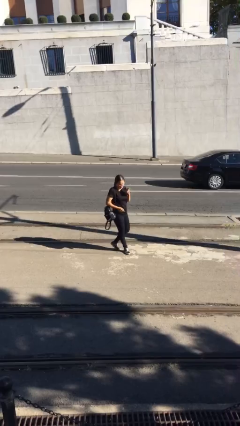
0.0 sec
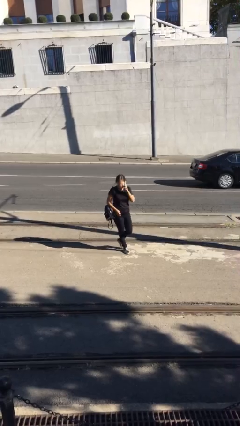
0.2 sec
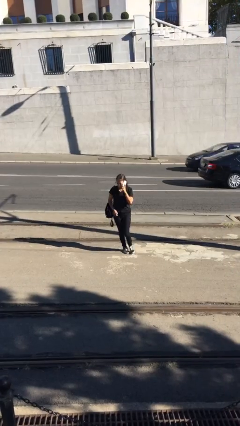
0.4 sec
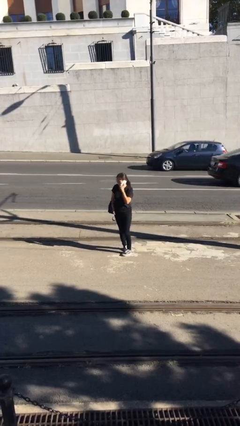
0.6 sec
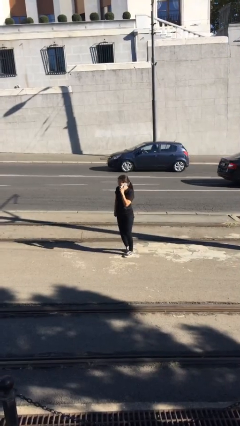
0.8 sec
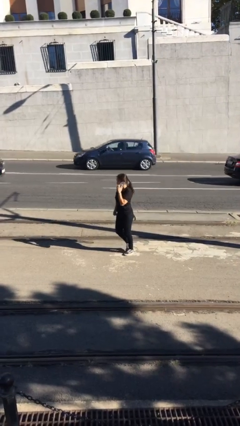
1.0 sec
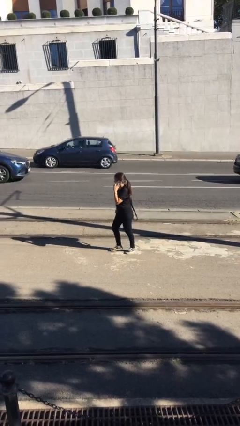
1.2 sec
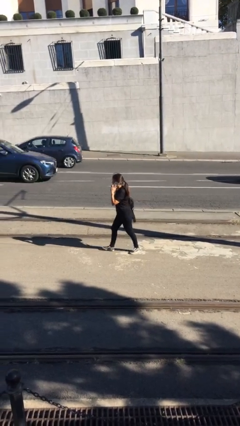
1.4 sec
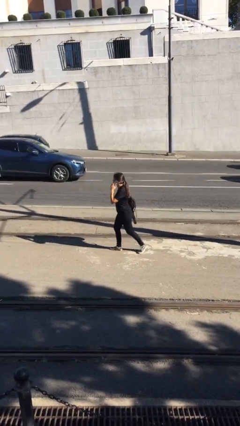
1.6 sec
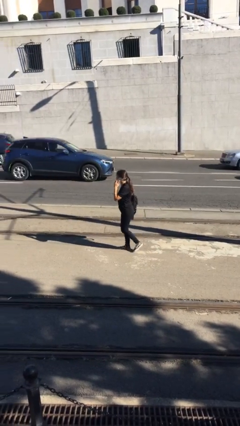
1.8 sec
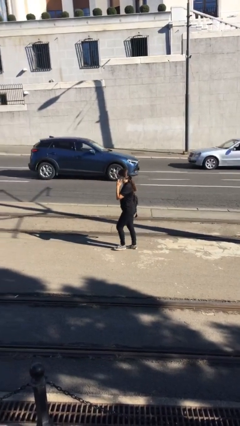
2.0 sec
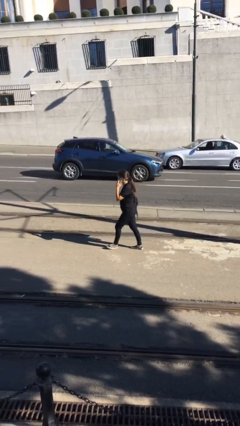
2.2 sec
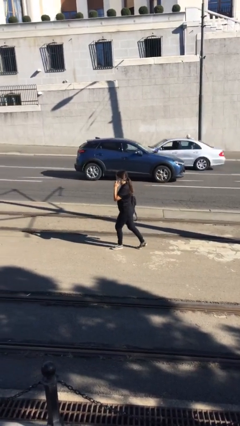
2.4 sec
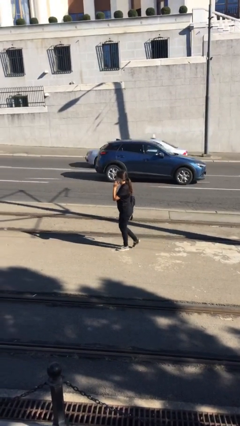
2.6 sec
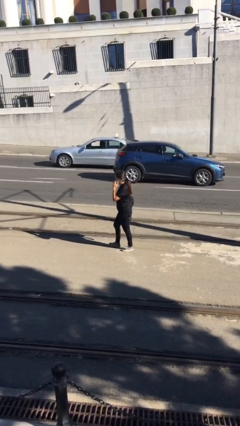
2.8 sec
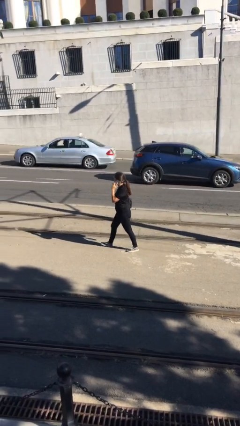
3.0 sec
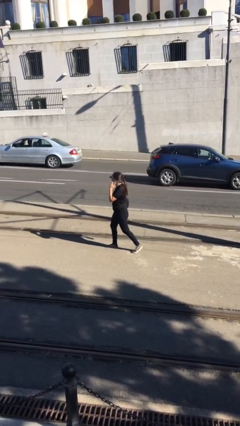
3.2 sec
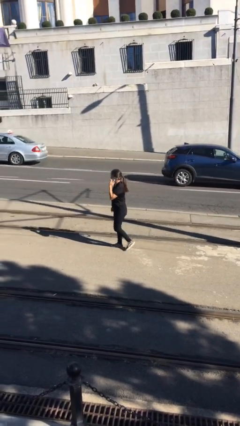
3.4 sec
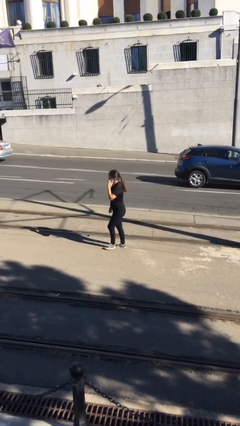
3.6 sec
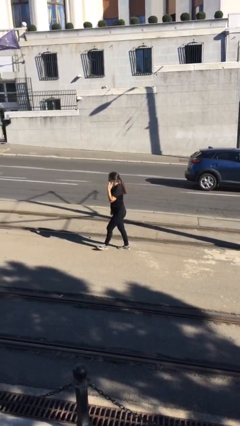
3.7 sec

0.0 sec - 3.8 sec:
person talks on phone

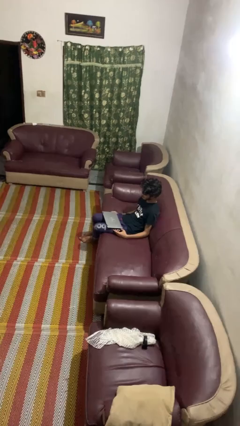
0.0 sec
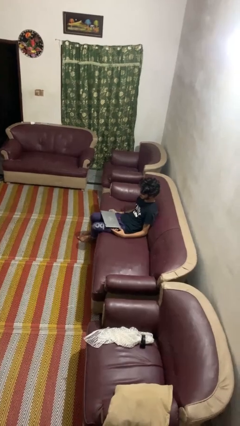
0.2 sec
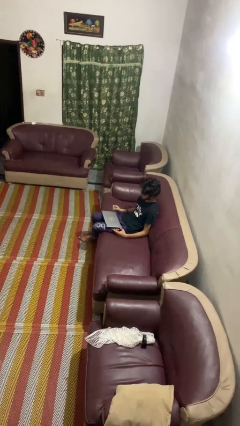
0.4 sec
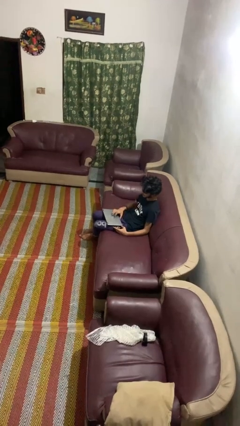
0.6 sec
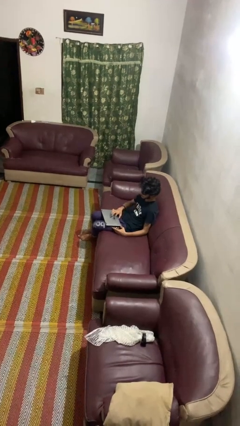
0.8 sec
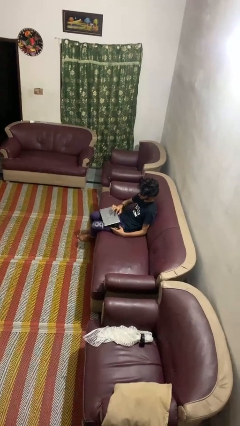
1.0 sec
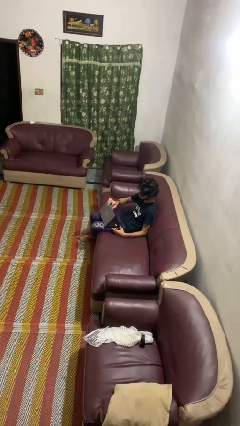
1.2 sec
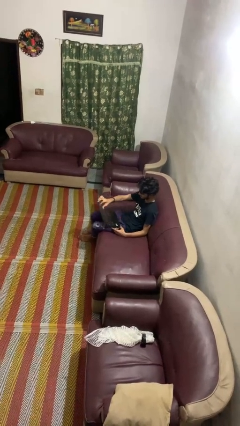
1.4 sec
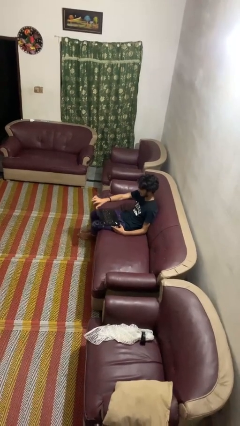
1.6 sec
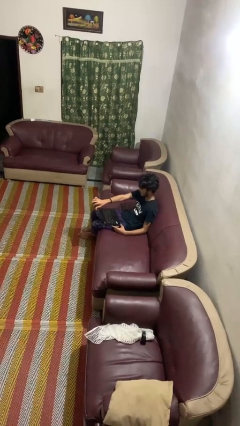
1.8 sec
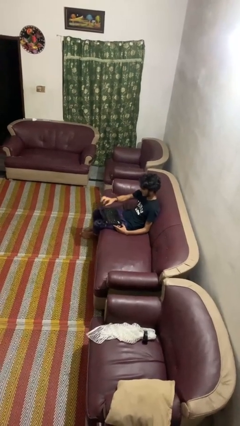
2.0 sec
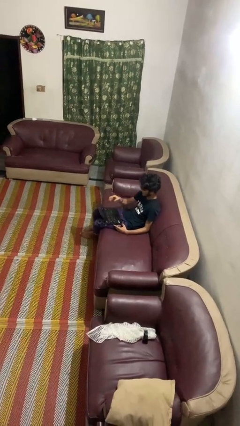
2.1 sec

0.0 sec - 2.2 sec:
person opens laptop

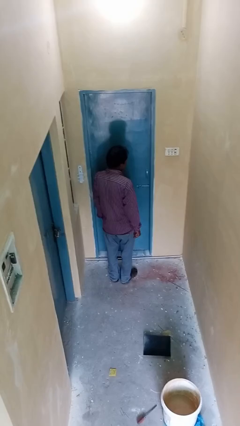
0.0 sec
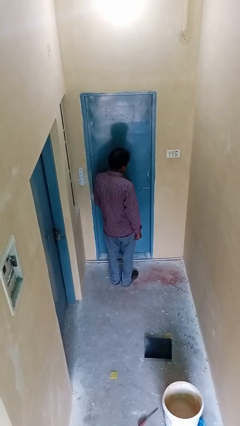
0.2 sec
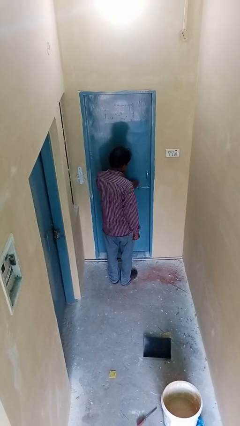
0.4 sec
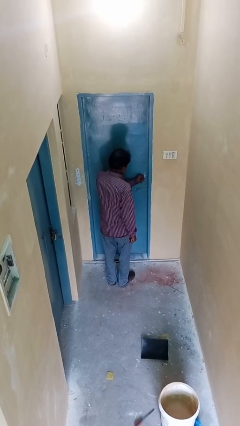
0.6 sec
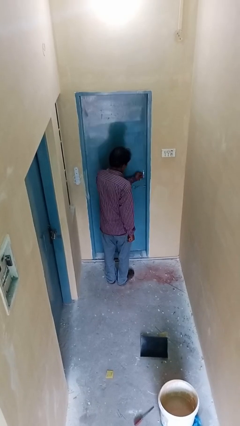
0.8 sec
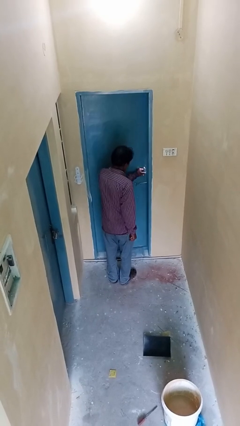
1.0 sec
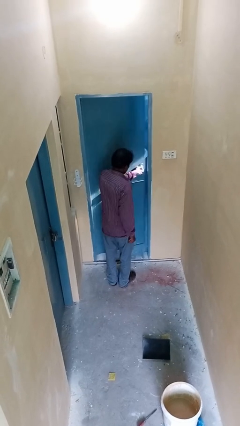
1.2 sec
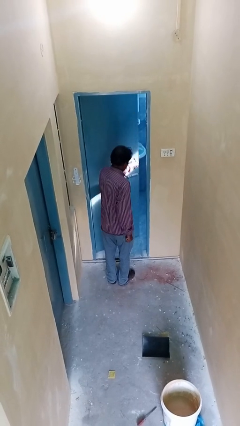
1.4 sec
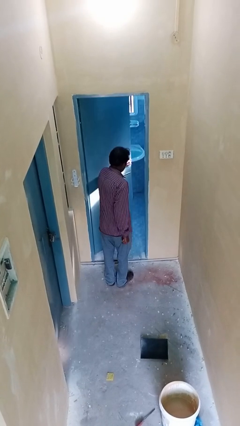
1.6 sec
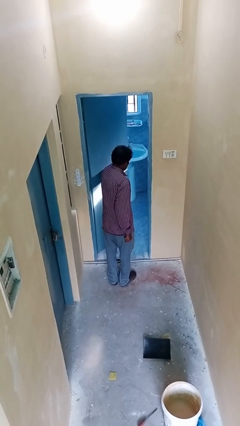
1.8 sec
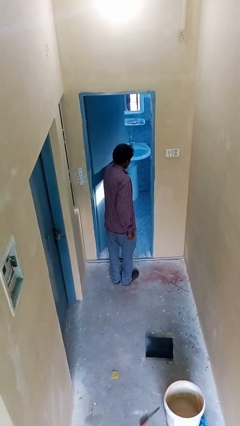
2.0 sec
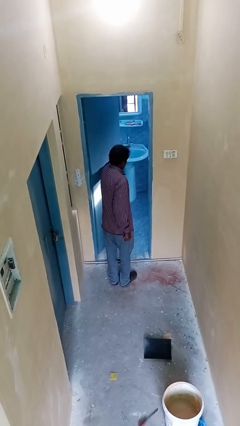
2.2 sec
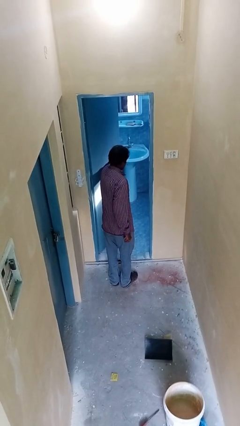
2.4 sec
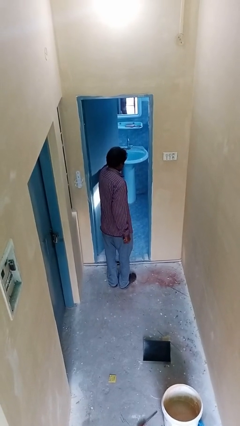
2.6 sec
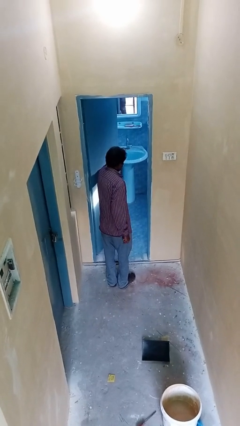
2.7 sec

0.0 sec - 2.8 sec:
person opens facility door

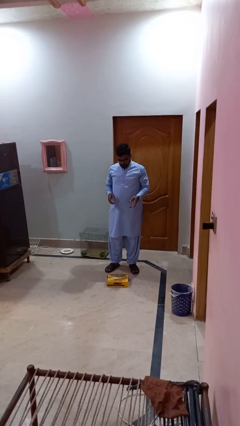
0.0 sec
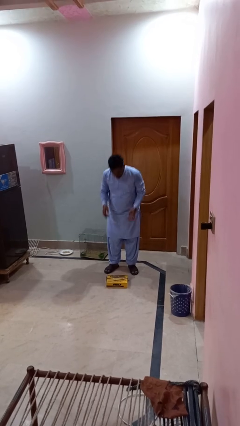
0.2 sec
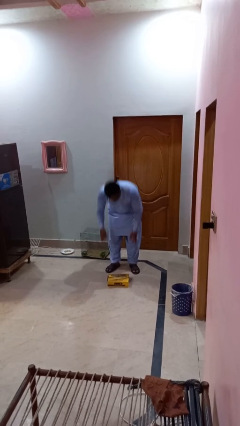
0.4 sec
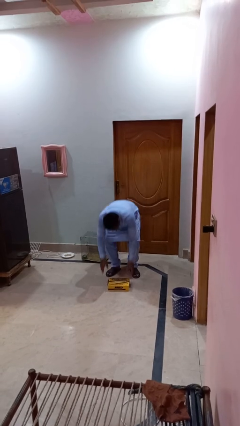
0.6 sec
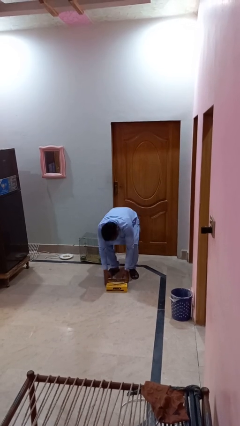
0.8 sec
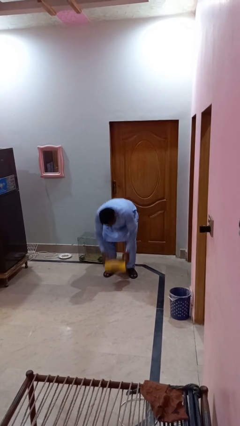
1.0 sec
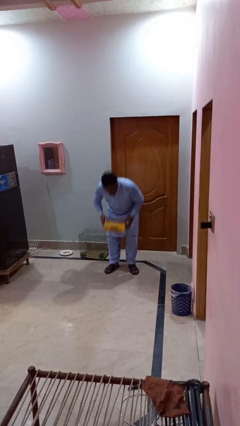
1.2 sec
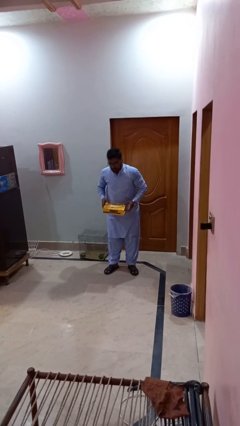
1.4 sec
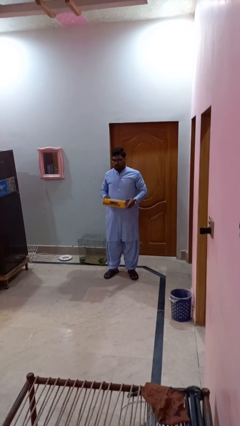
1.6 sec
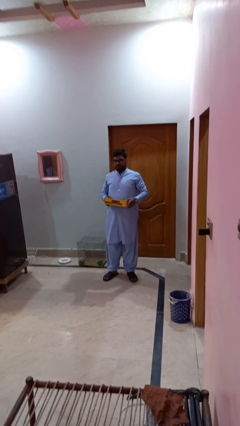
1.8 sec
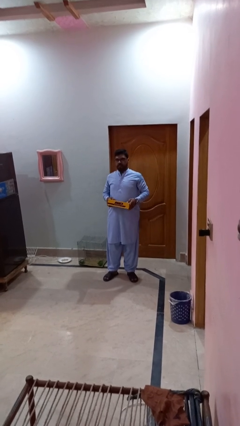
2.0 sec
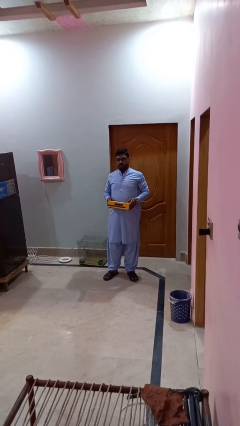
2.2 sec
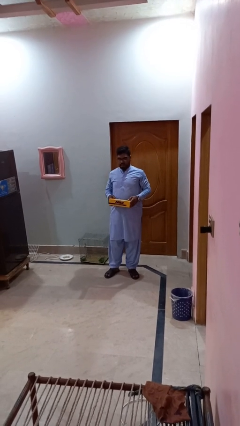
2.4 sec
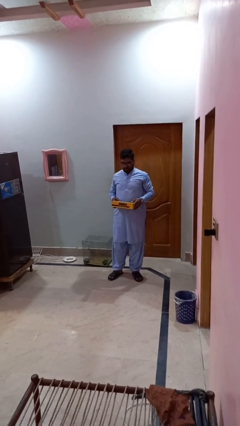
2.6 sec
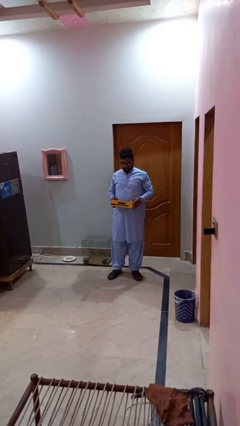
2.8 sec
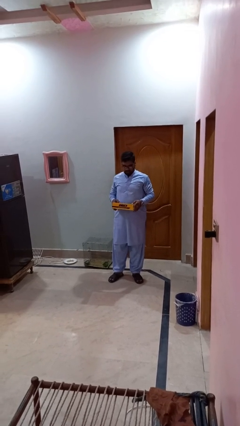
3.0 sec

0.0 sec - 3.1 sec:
person picks up object from floor

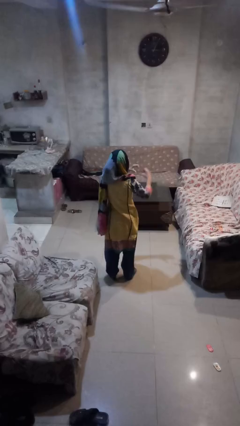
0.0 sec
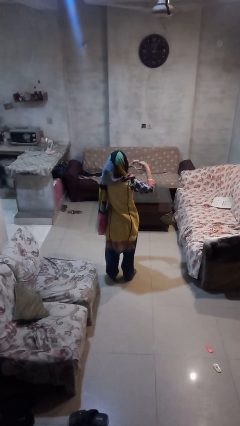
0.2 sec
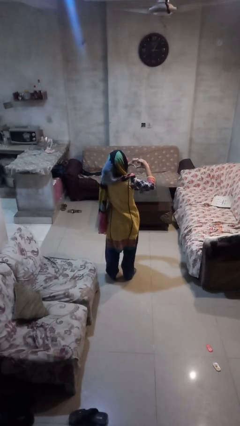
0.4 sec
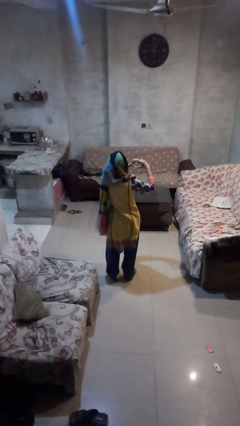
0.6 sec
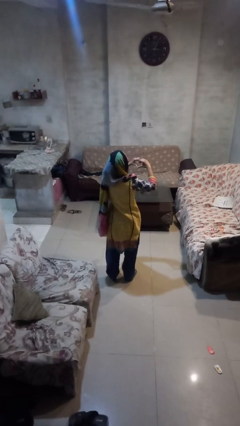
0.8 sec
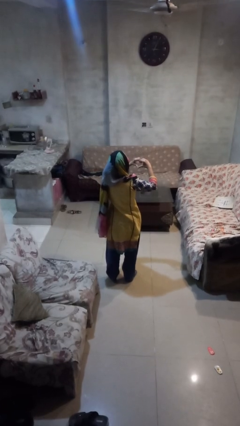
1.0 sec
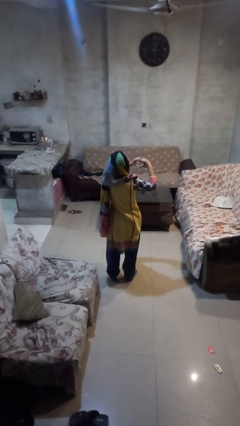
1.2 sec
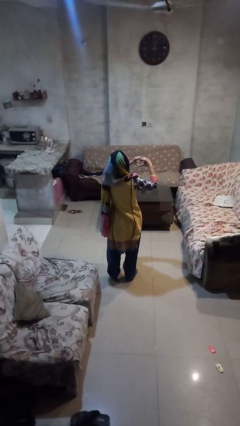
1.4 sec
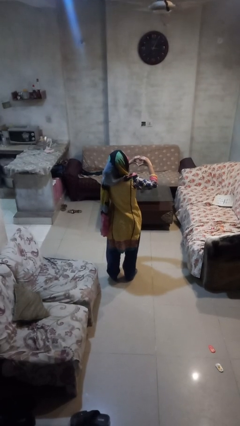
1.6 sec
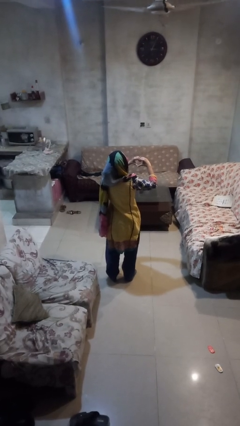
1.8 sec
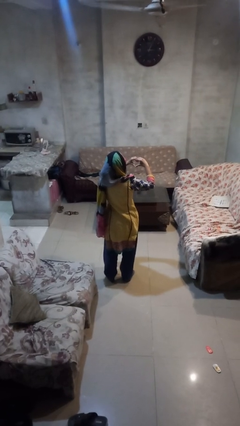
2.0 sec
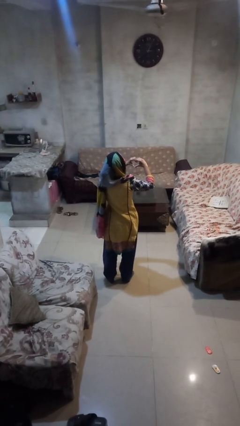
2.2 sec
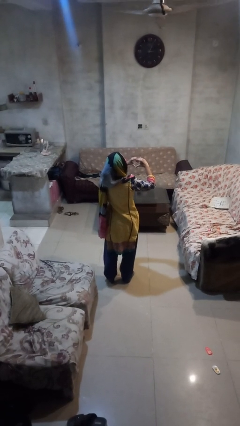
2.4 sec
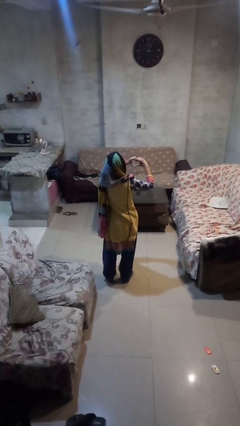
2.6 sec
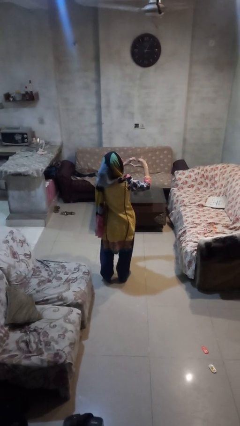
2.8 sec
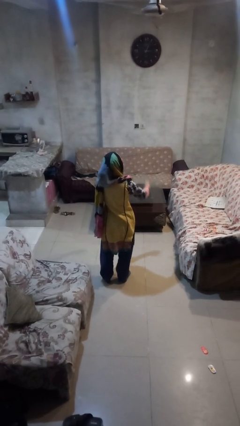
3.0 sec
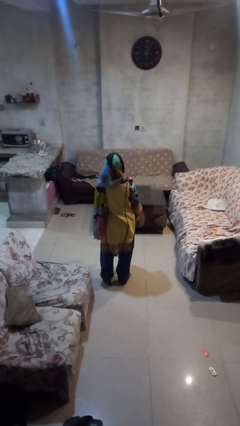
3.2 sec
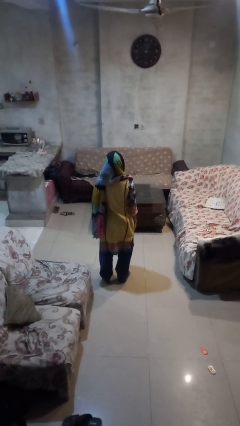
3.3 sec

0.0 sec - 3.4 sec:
person gestures heart

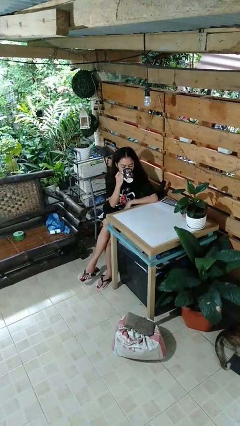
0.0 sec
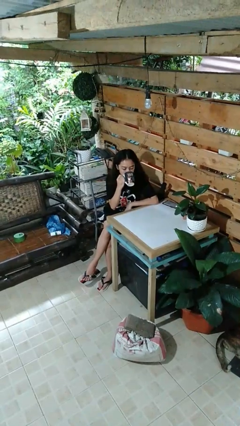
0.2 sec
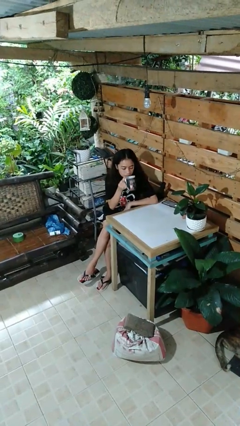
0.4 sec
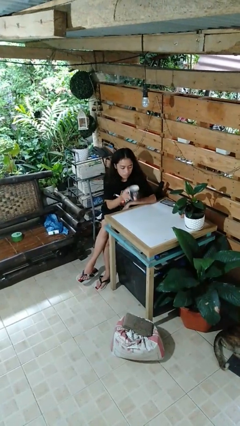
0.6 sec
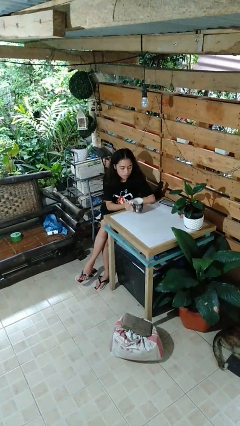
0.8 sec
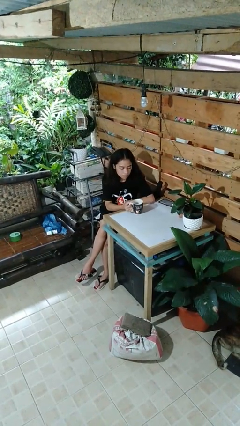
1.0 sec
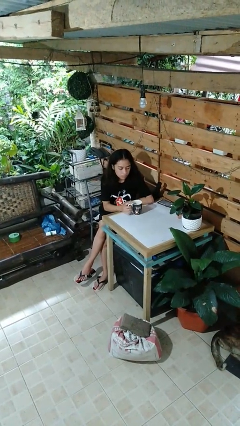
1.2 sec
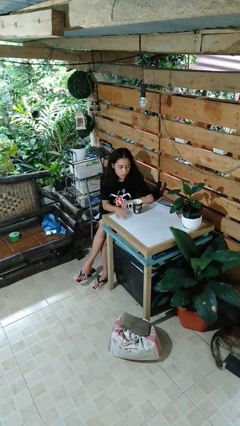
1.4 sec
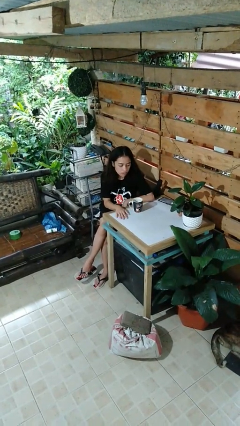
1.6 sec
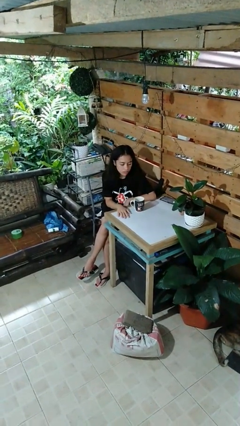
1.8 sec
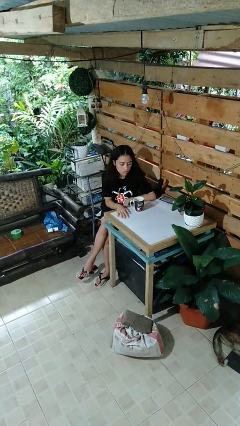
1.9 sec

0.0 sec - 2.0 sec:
person puts down object on table

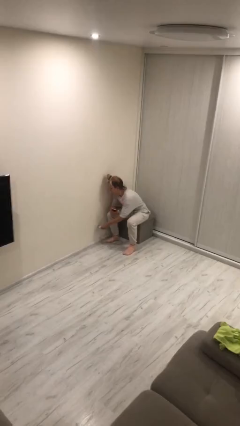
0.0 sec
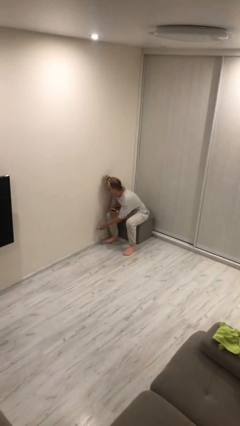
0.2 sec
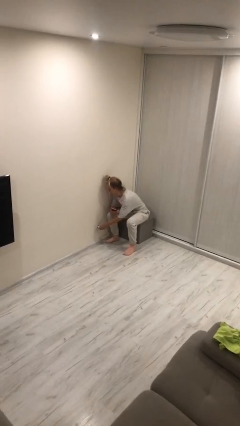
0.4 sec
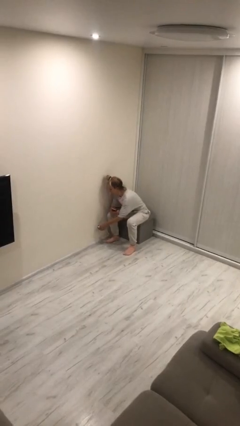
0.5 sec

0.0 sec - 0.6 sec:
person plugs into electrical socket
